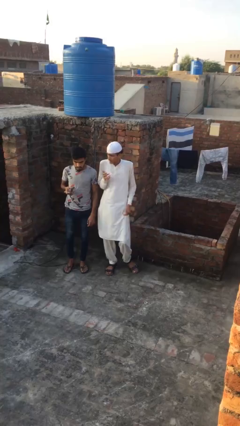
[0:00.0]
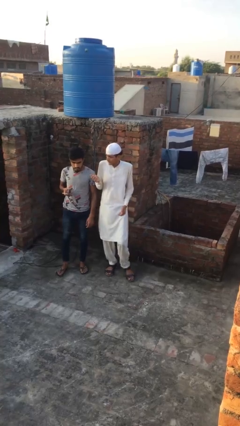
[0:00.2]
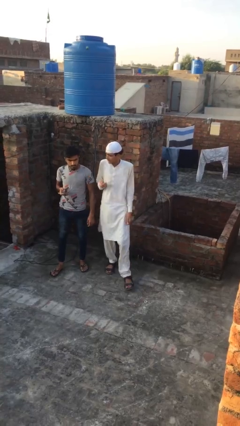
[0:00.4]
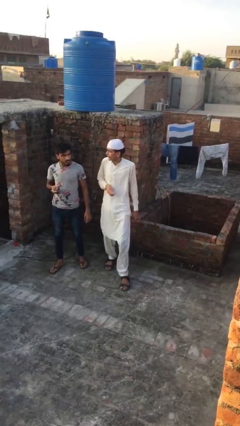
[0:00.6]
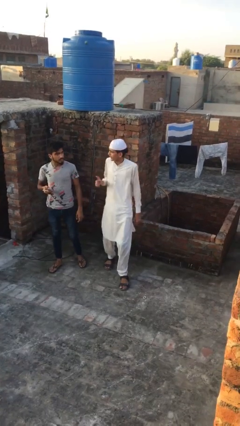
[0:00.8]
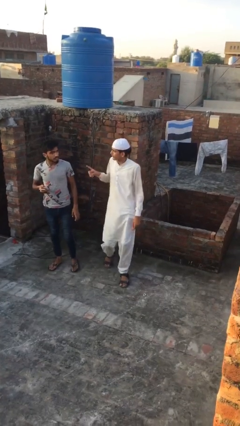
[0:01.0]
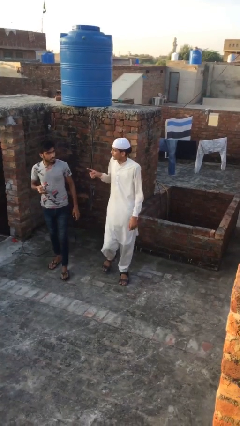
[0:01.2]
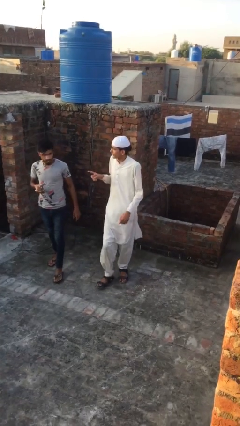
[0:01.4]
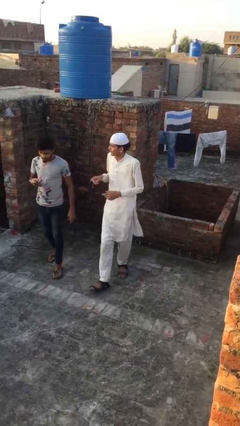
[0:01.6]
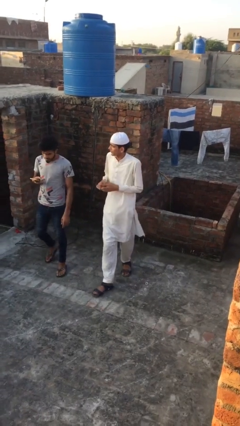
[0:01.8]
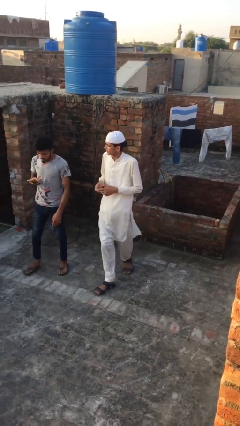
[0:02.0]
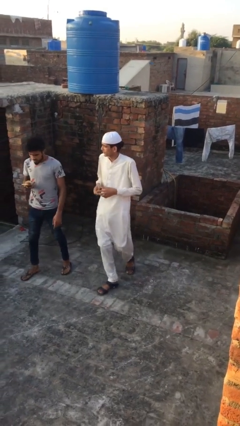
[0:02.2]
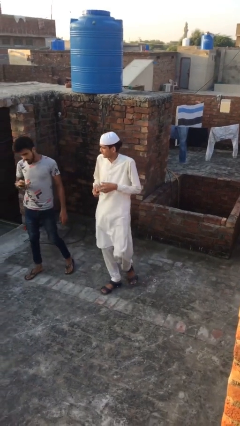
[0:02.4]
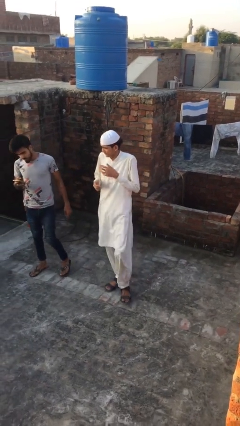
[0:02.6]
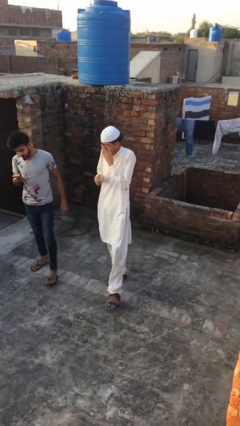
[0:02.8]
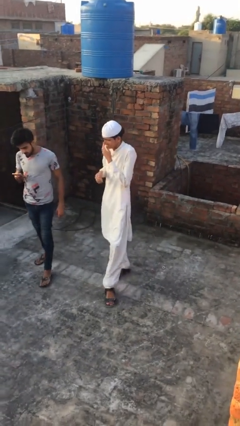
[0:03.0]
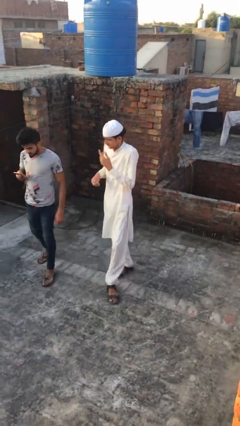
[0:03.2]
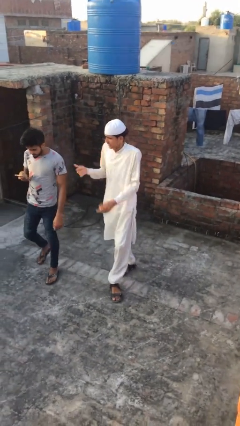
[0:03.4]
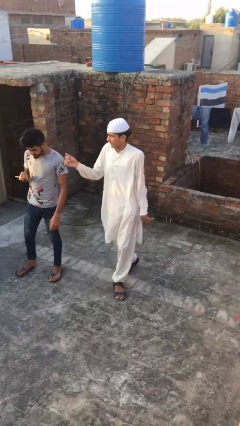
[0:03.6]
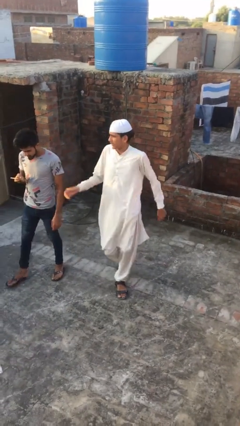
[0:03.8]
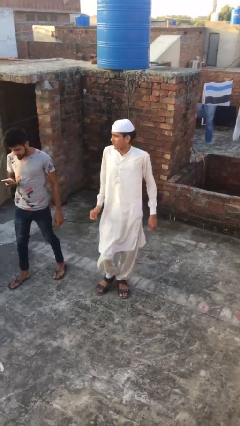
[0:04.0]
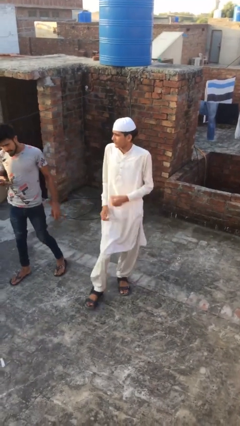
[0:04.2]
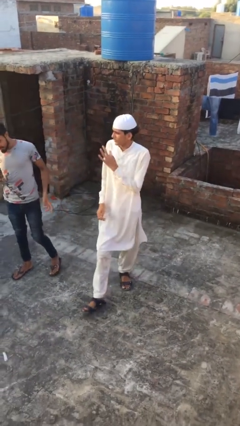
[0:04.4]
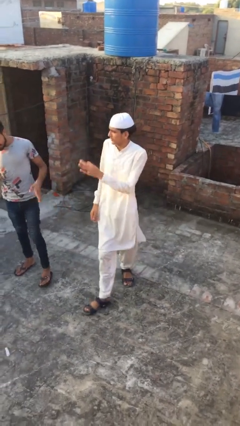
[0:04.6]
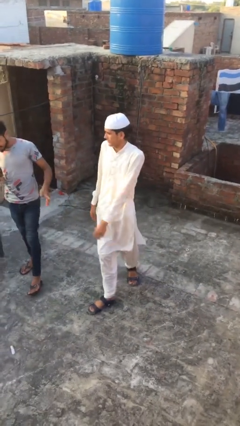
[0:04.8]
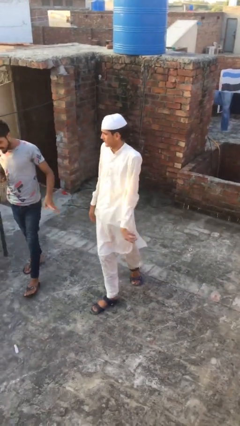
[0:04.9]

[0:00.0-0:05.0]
person talks to person

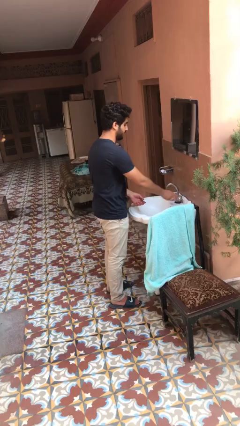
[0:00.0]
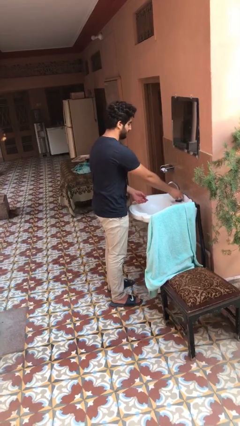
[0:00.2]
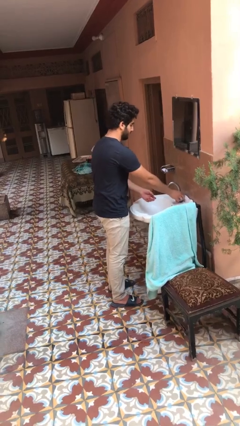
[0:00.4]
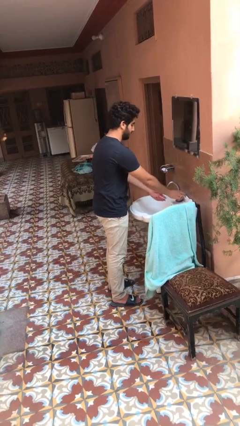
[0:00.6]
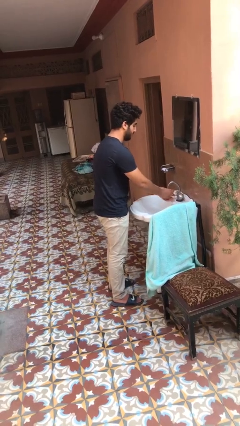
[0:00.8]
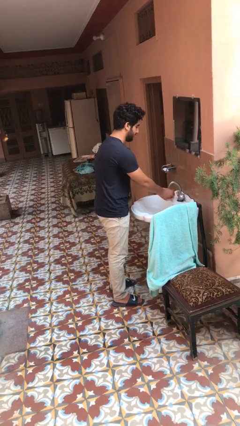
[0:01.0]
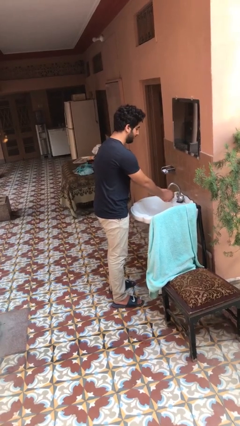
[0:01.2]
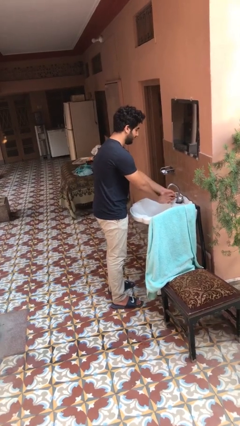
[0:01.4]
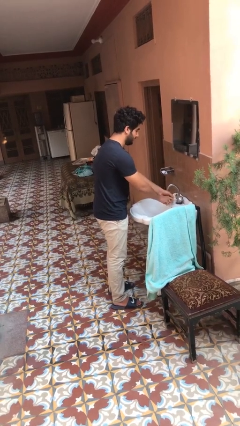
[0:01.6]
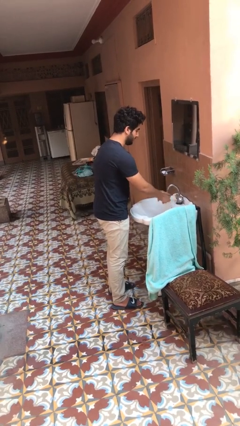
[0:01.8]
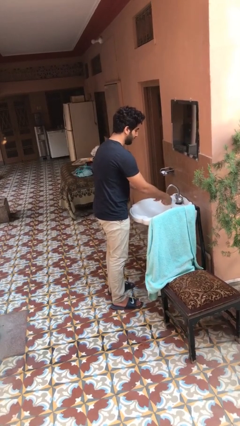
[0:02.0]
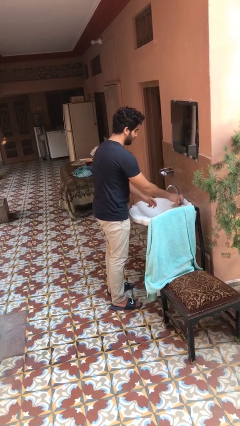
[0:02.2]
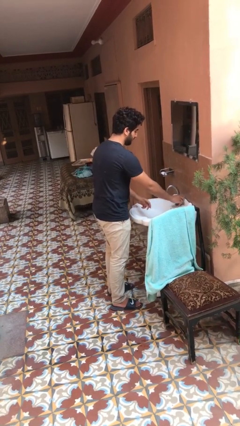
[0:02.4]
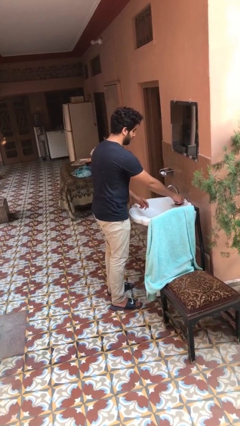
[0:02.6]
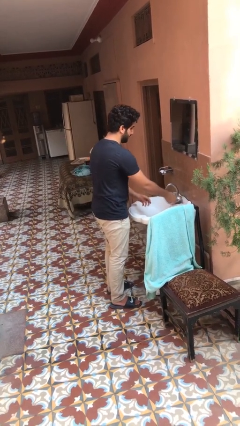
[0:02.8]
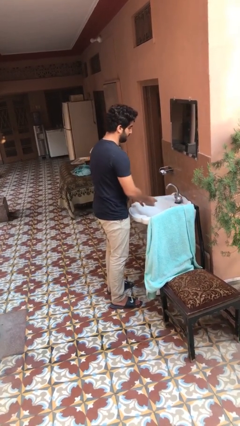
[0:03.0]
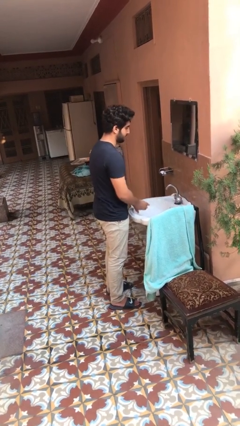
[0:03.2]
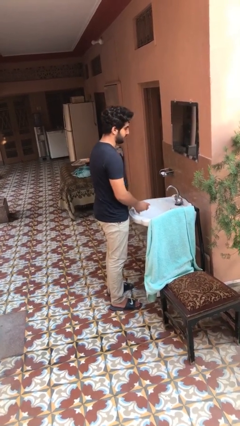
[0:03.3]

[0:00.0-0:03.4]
person washes hands

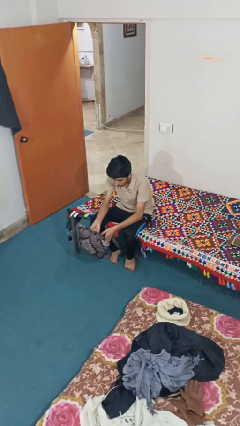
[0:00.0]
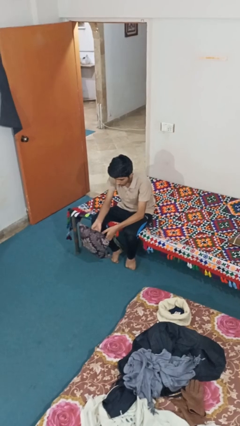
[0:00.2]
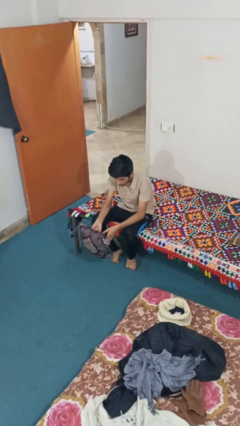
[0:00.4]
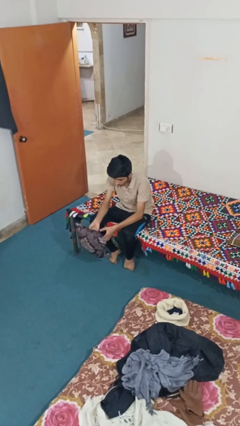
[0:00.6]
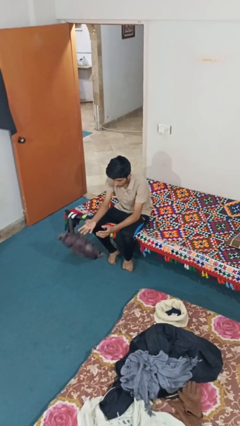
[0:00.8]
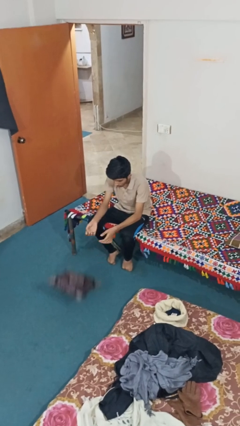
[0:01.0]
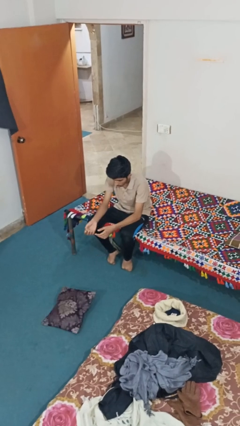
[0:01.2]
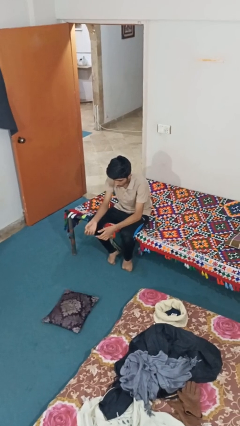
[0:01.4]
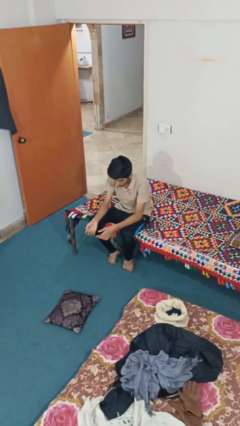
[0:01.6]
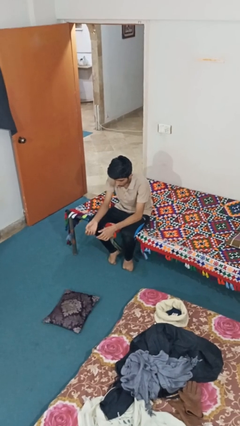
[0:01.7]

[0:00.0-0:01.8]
person drops object

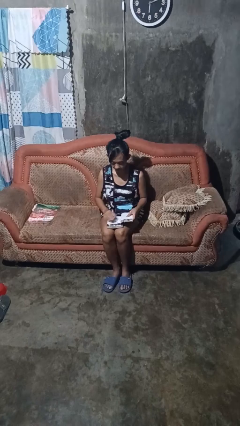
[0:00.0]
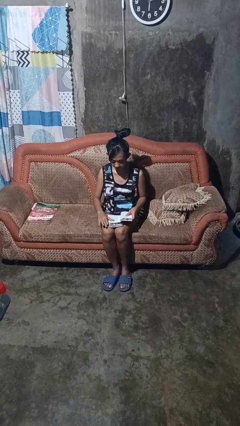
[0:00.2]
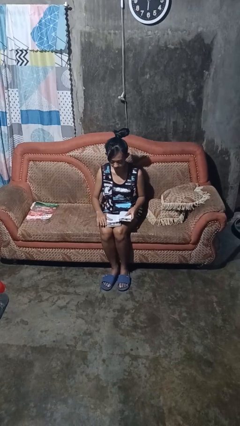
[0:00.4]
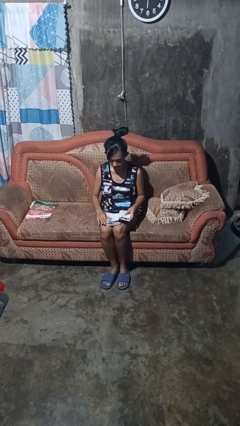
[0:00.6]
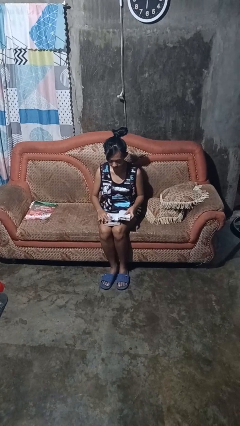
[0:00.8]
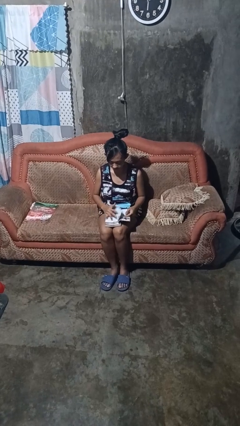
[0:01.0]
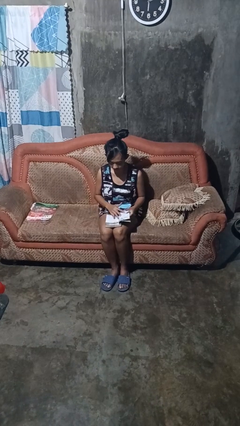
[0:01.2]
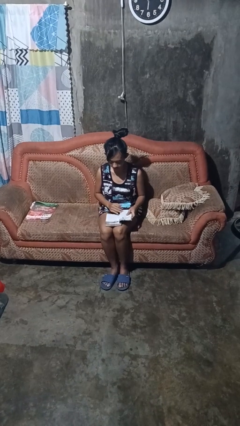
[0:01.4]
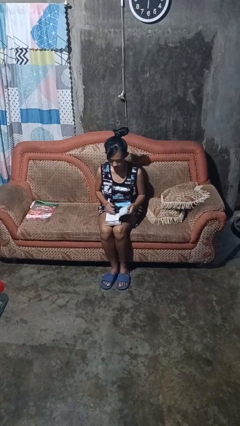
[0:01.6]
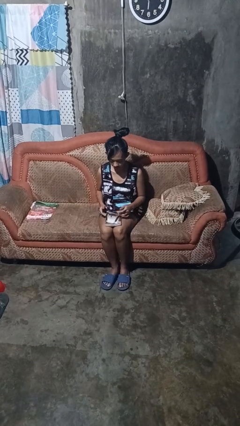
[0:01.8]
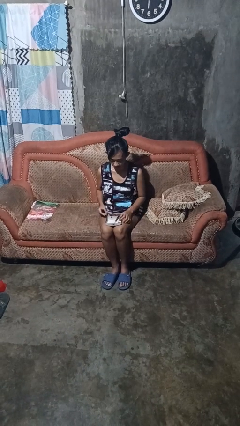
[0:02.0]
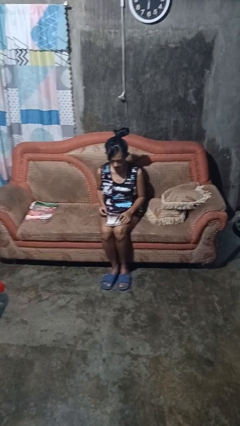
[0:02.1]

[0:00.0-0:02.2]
person reads book

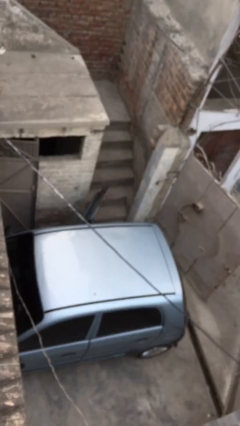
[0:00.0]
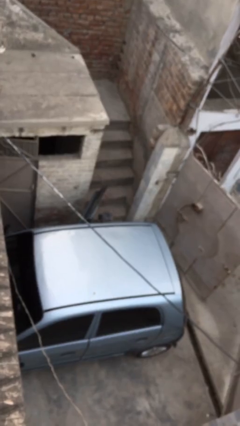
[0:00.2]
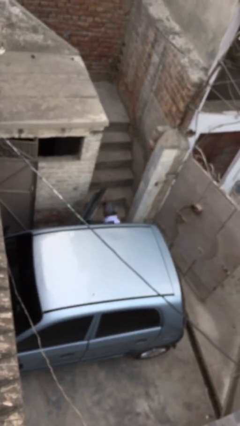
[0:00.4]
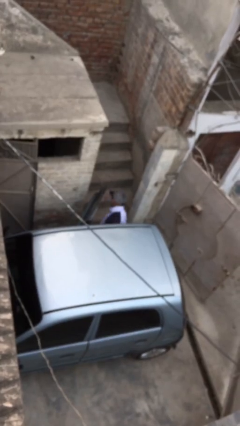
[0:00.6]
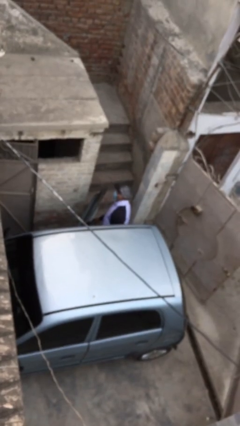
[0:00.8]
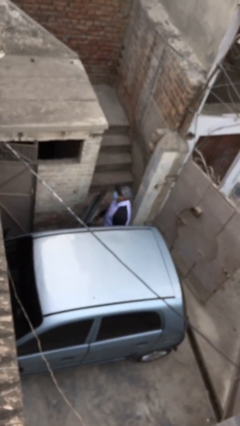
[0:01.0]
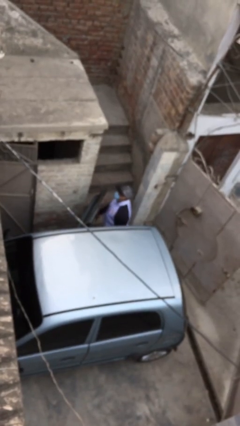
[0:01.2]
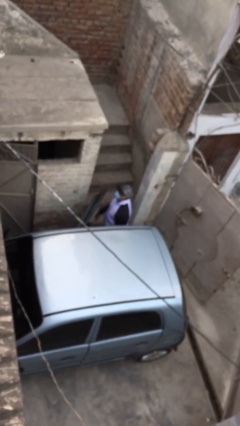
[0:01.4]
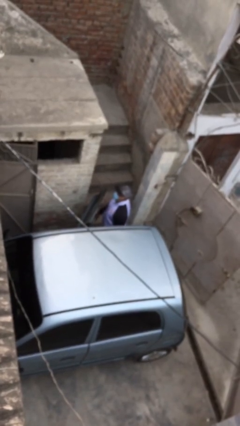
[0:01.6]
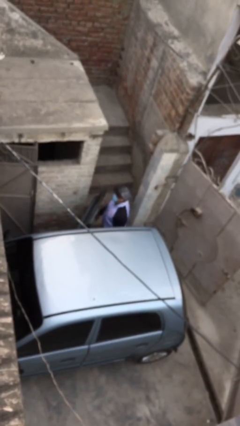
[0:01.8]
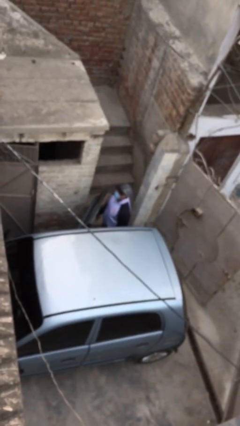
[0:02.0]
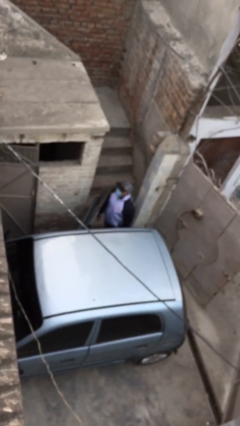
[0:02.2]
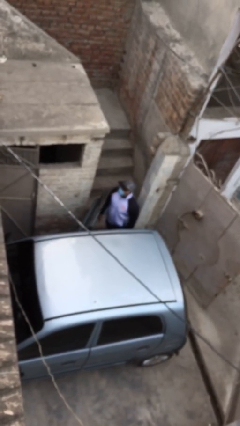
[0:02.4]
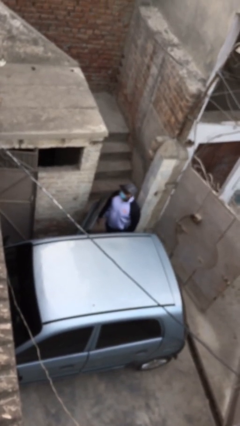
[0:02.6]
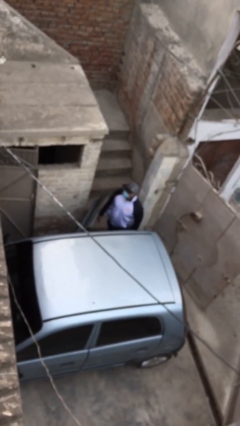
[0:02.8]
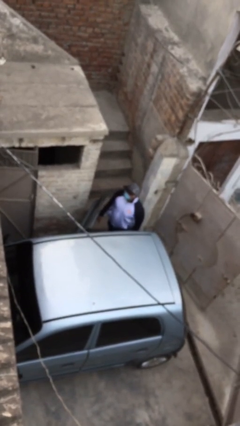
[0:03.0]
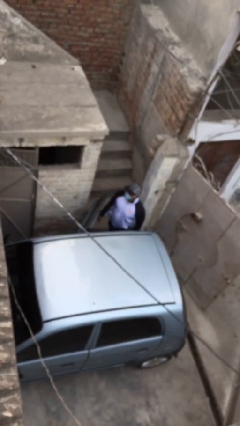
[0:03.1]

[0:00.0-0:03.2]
person exits car

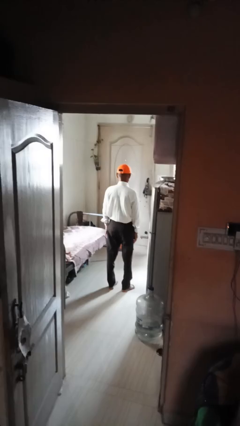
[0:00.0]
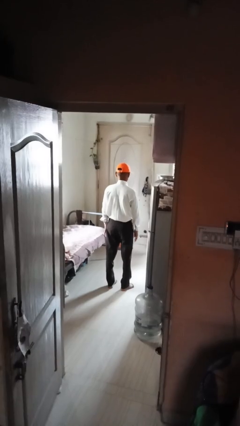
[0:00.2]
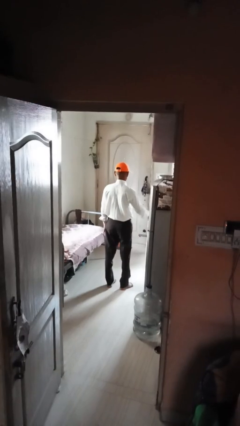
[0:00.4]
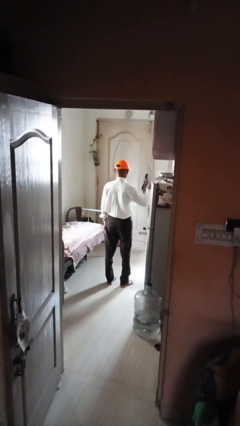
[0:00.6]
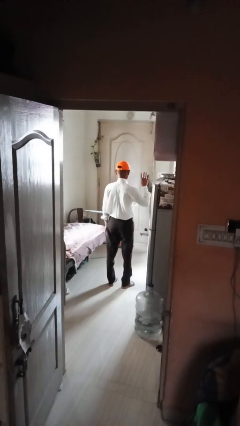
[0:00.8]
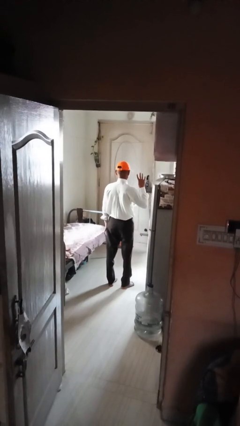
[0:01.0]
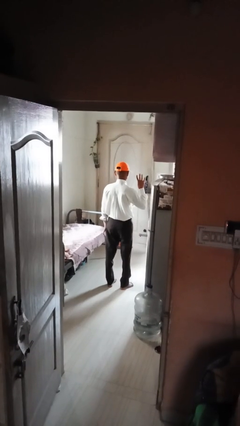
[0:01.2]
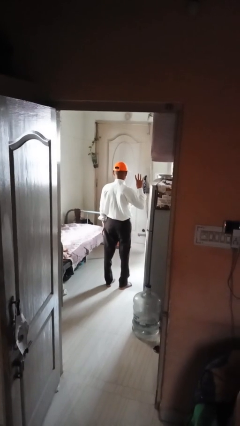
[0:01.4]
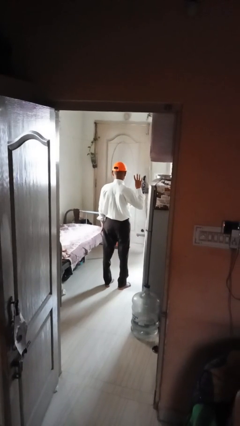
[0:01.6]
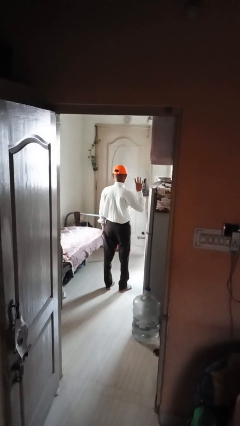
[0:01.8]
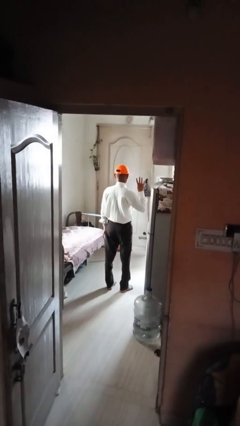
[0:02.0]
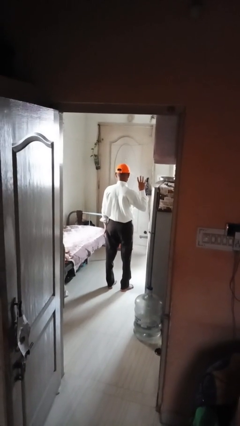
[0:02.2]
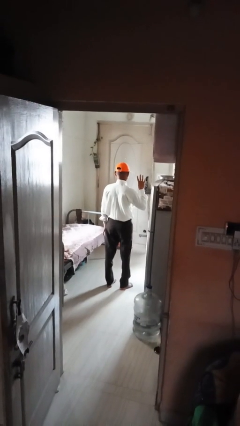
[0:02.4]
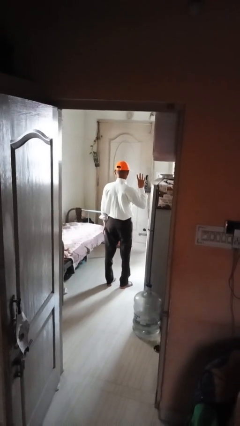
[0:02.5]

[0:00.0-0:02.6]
person gestures number four
